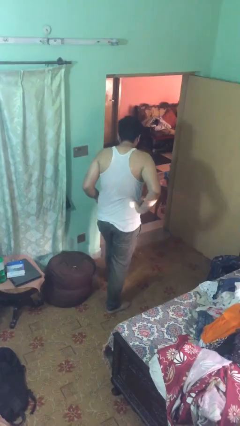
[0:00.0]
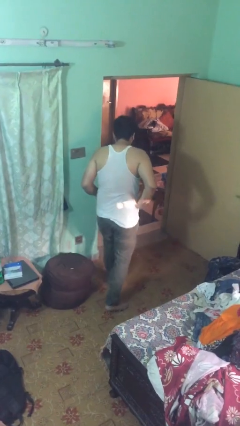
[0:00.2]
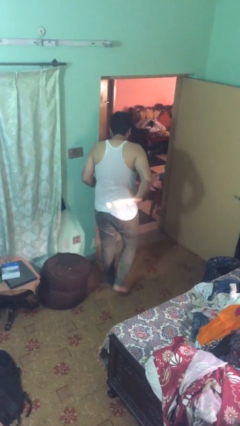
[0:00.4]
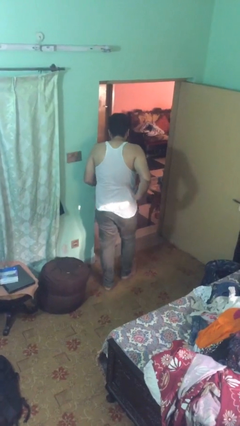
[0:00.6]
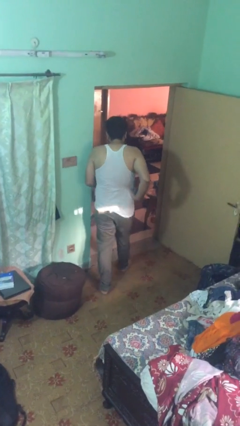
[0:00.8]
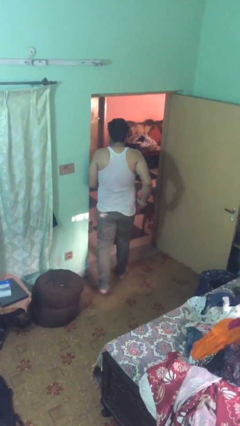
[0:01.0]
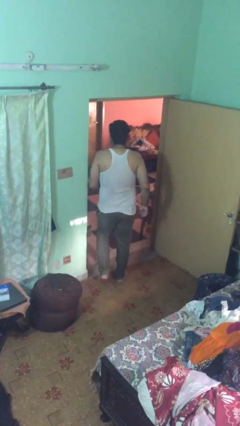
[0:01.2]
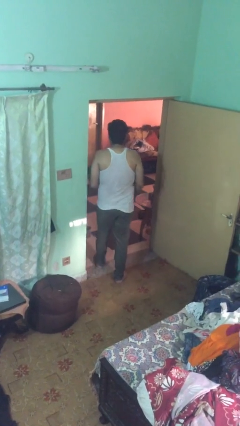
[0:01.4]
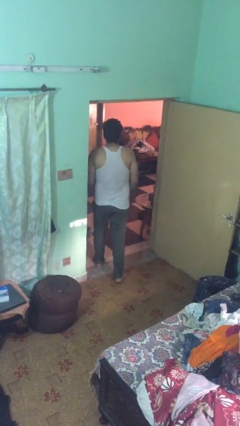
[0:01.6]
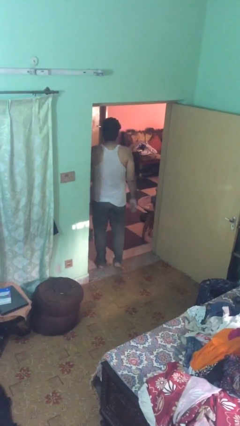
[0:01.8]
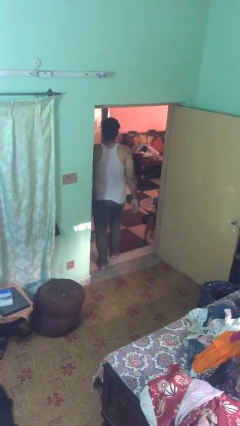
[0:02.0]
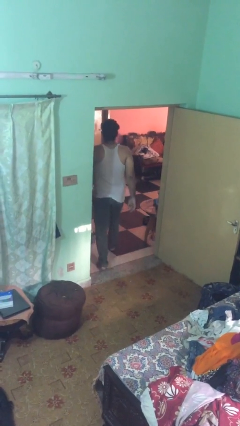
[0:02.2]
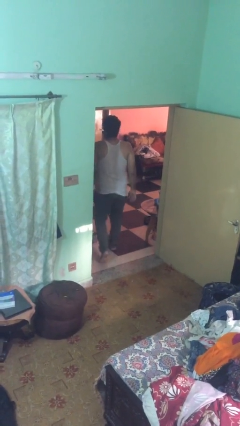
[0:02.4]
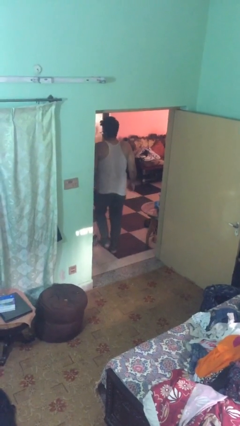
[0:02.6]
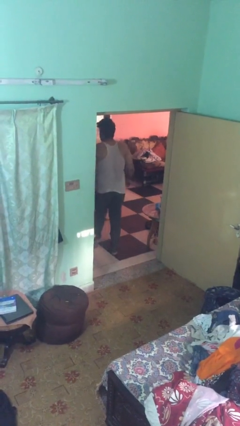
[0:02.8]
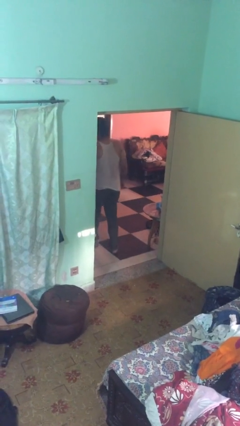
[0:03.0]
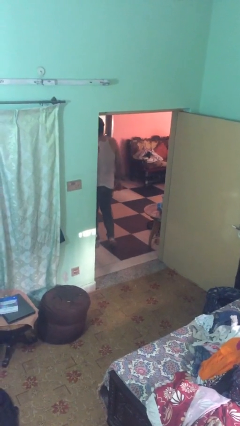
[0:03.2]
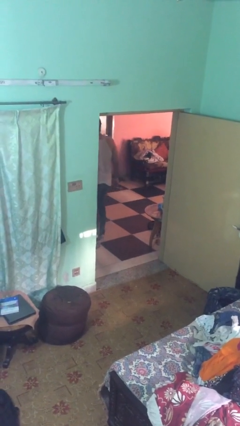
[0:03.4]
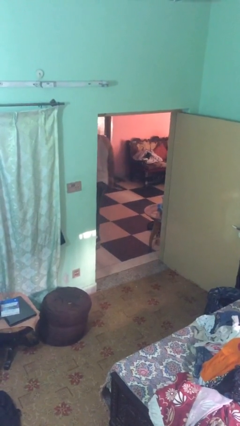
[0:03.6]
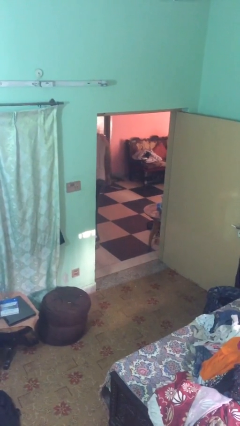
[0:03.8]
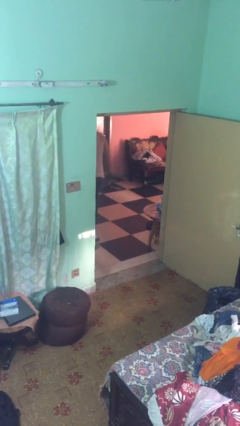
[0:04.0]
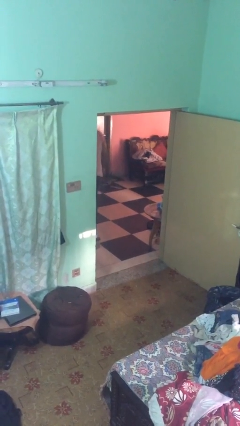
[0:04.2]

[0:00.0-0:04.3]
person exits scene through structure

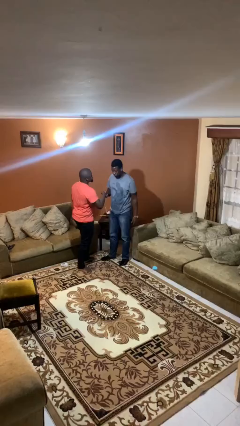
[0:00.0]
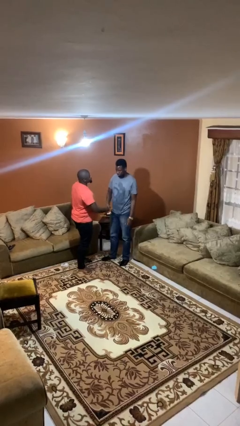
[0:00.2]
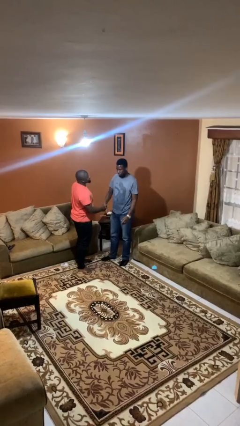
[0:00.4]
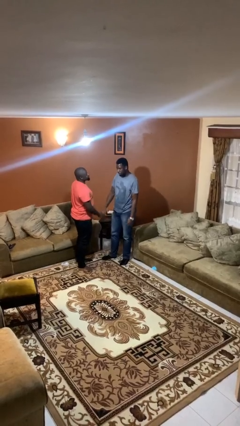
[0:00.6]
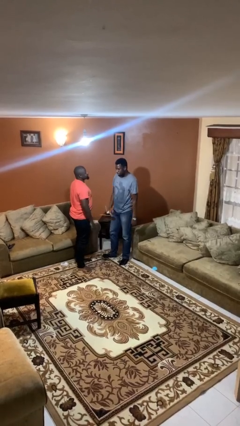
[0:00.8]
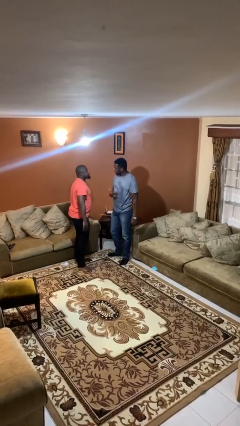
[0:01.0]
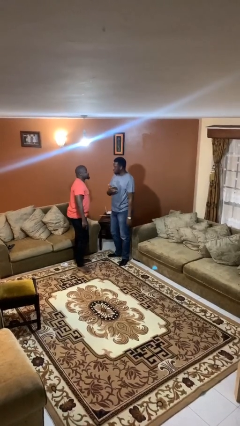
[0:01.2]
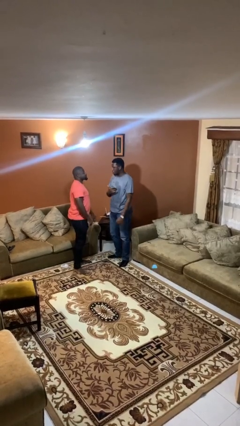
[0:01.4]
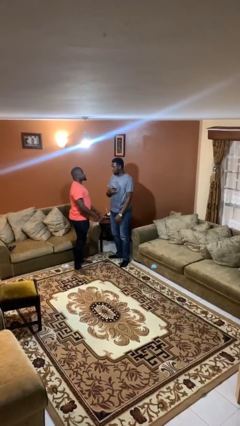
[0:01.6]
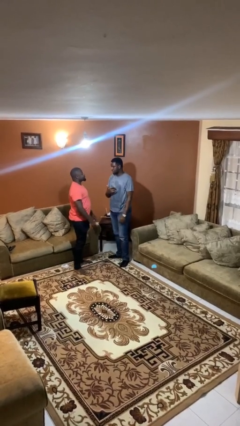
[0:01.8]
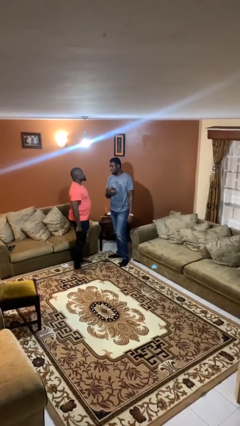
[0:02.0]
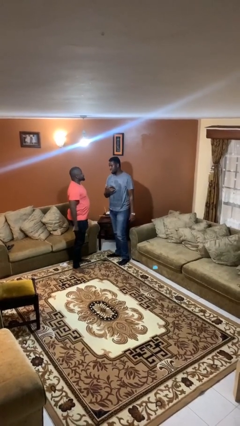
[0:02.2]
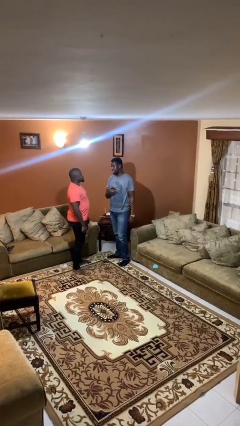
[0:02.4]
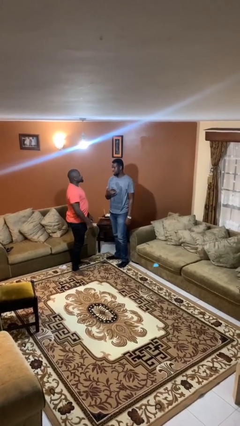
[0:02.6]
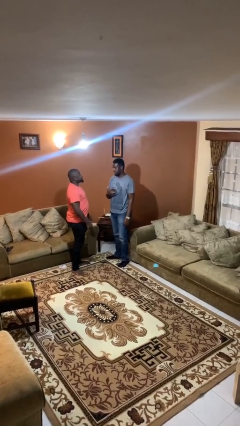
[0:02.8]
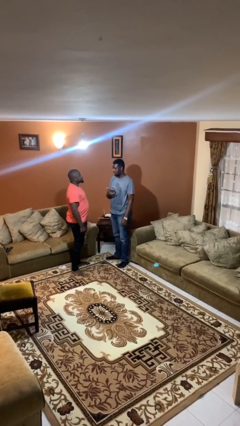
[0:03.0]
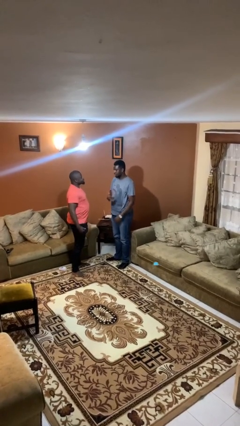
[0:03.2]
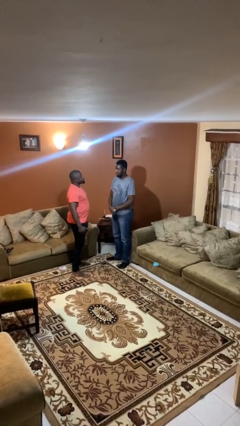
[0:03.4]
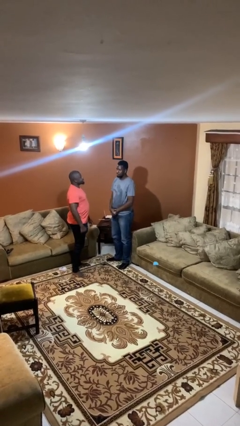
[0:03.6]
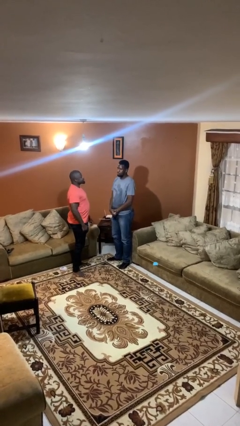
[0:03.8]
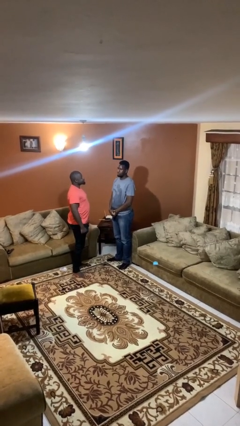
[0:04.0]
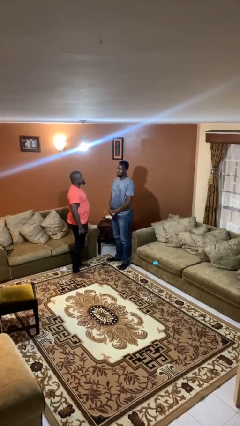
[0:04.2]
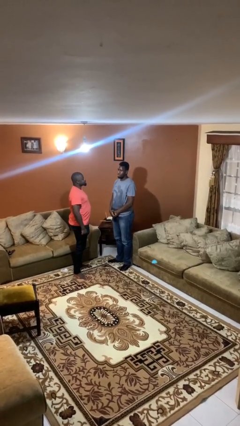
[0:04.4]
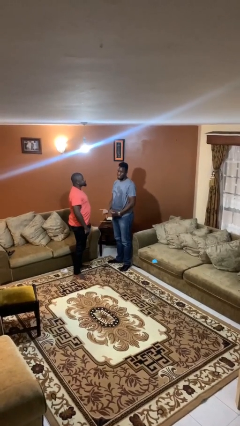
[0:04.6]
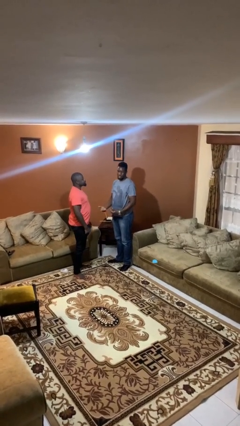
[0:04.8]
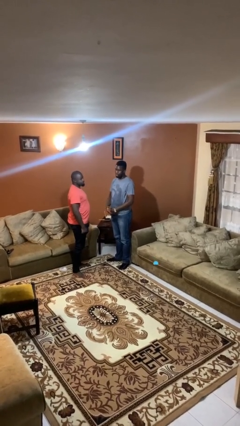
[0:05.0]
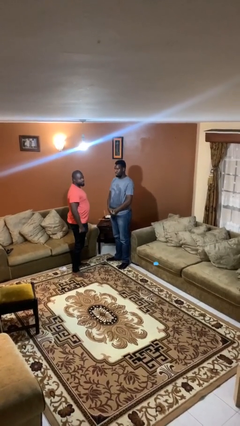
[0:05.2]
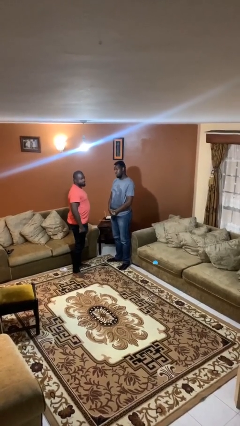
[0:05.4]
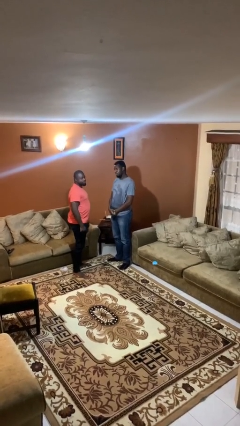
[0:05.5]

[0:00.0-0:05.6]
person talks to person

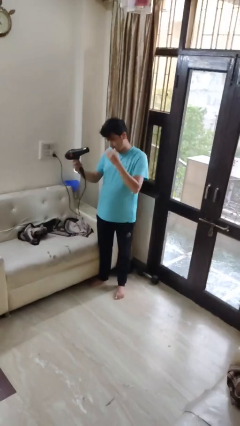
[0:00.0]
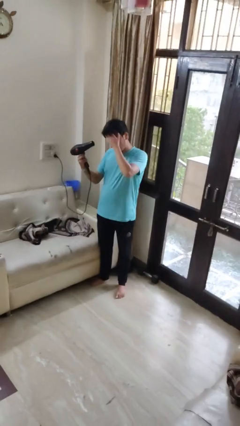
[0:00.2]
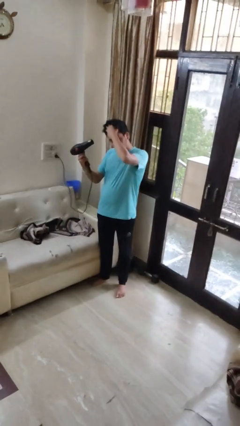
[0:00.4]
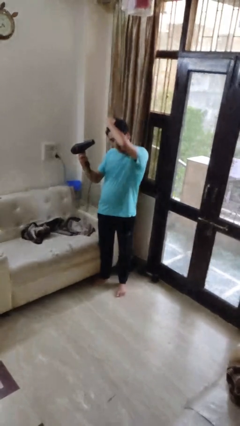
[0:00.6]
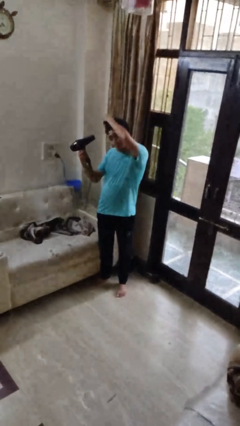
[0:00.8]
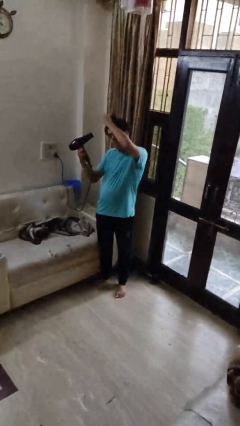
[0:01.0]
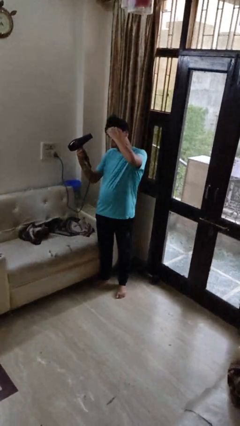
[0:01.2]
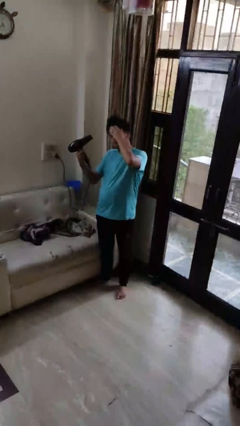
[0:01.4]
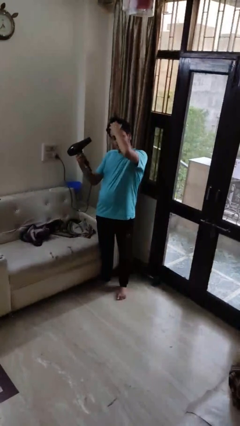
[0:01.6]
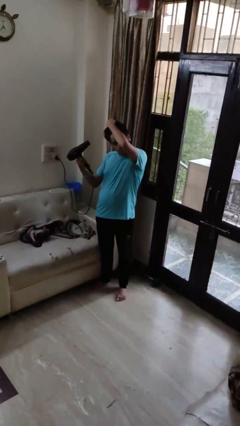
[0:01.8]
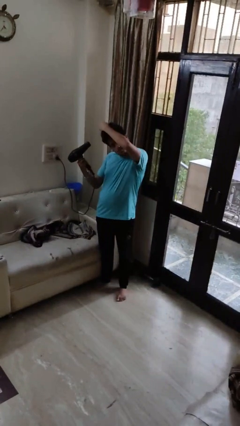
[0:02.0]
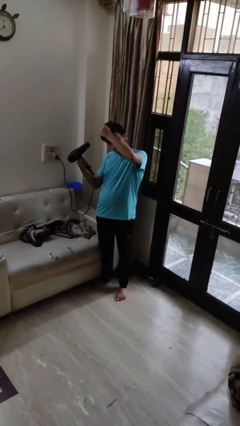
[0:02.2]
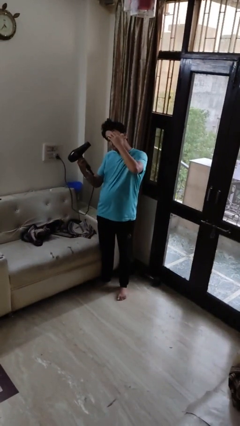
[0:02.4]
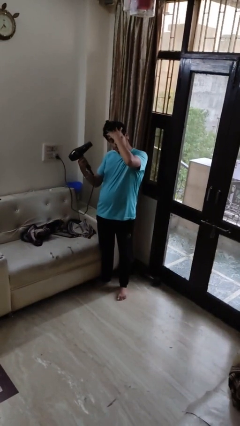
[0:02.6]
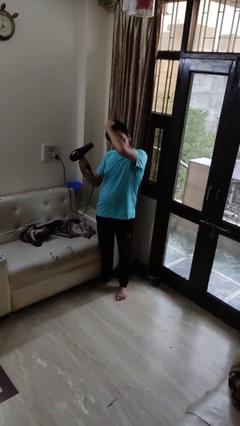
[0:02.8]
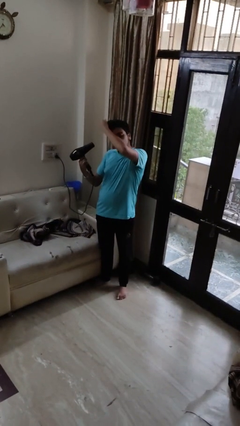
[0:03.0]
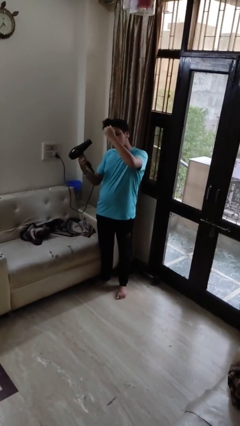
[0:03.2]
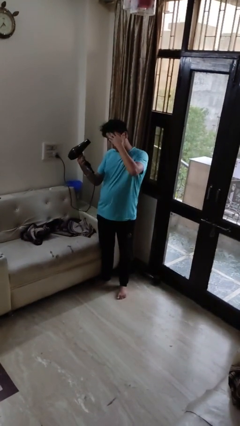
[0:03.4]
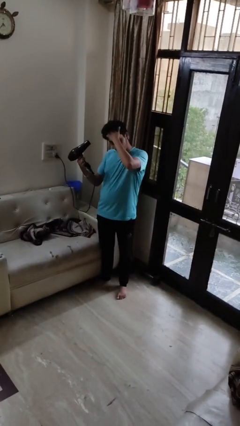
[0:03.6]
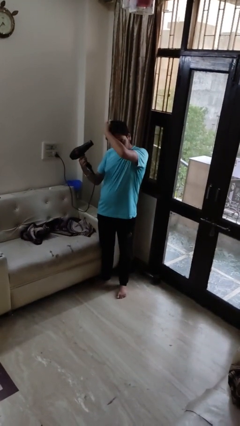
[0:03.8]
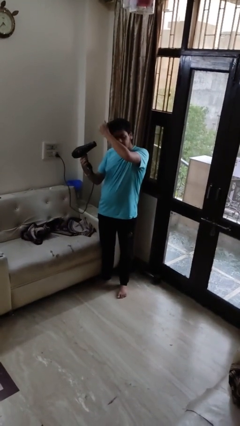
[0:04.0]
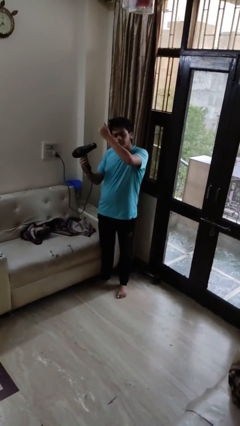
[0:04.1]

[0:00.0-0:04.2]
person dries hair with hairdryer

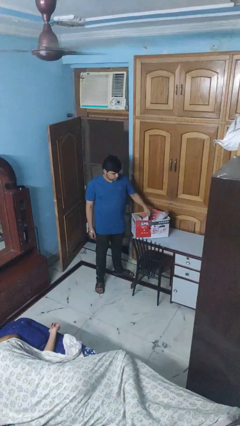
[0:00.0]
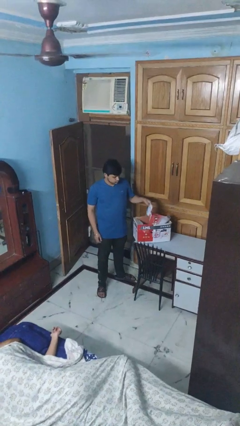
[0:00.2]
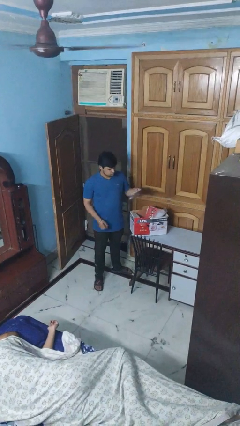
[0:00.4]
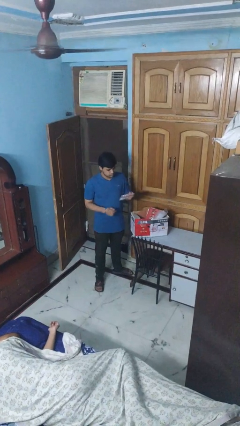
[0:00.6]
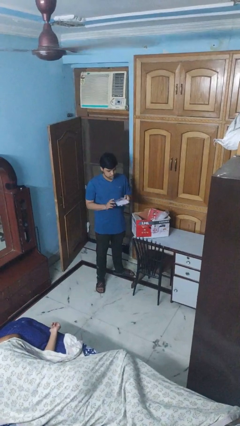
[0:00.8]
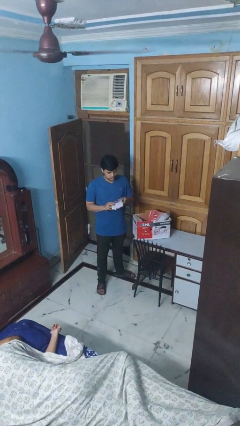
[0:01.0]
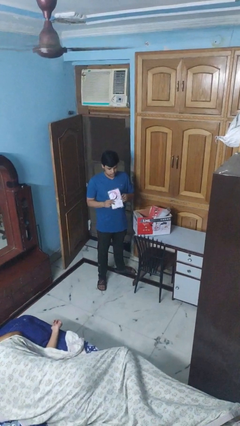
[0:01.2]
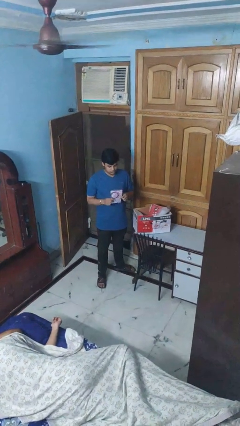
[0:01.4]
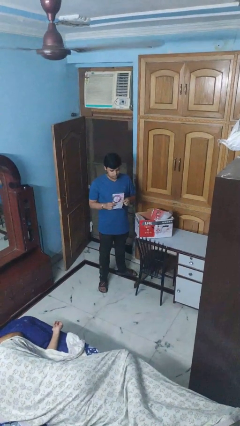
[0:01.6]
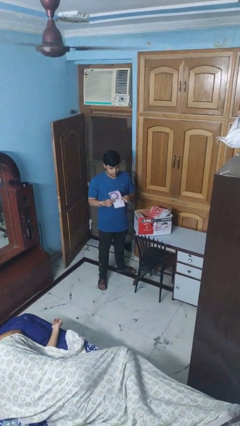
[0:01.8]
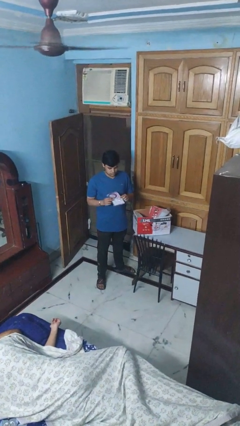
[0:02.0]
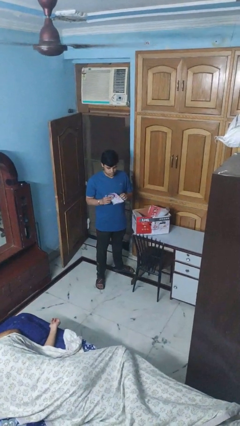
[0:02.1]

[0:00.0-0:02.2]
person takes object from box

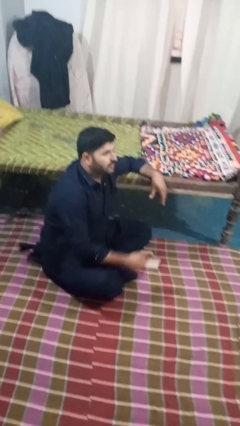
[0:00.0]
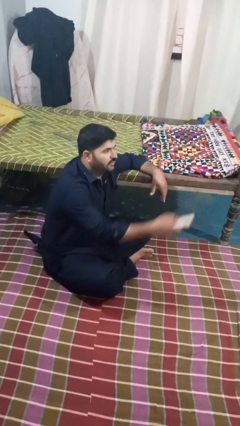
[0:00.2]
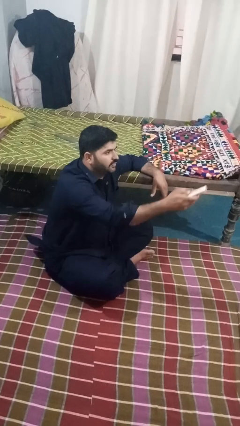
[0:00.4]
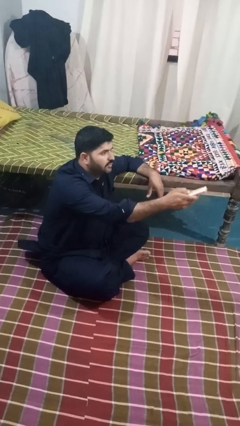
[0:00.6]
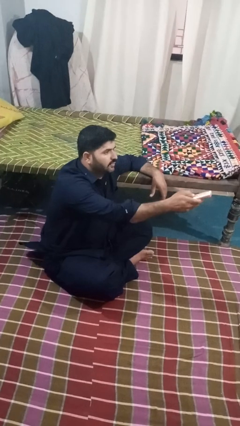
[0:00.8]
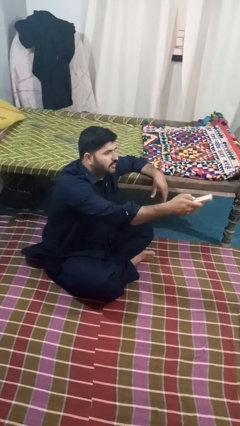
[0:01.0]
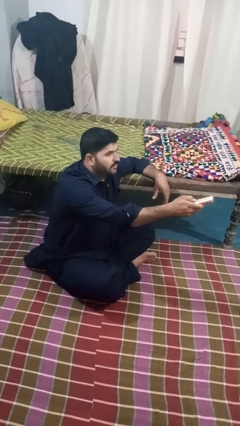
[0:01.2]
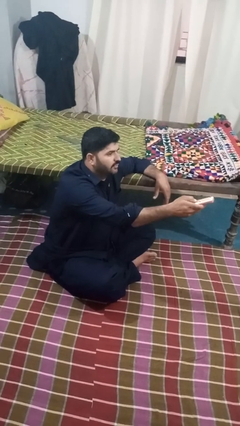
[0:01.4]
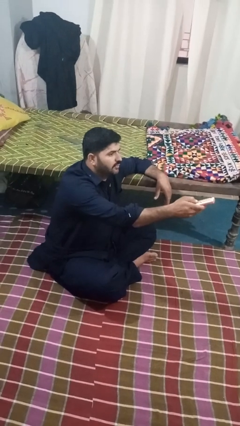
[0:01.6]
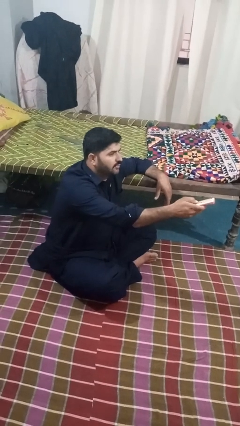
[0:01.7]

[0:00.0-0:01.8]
person uses television remote
